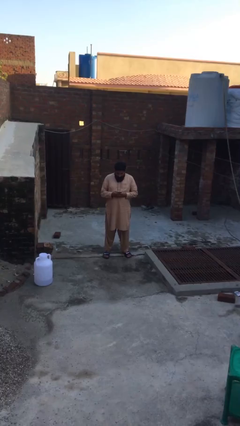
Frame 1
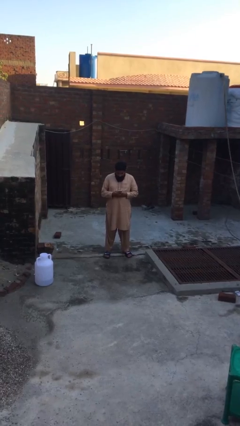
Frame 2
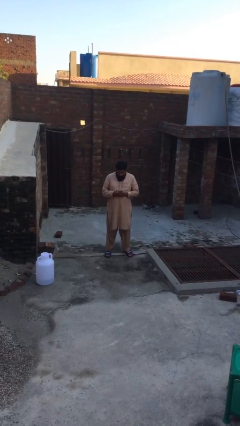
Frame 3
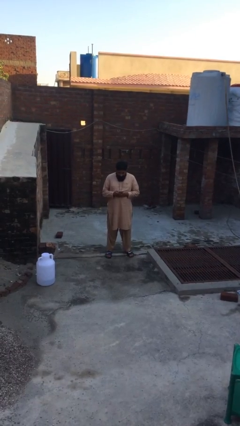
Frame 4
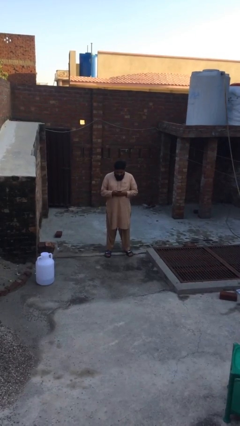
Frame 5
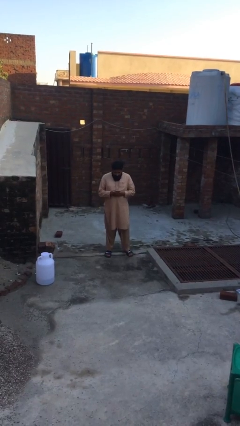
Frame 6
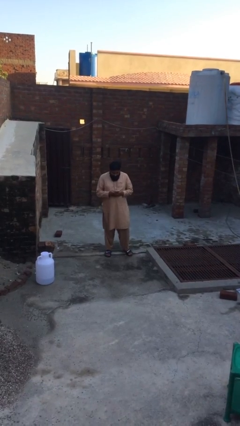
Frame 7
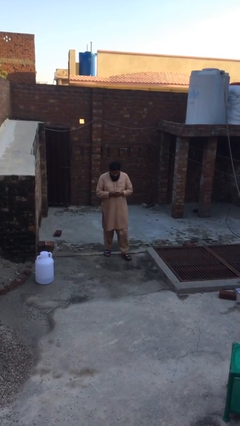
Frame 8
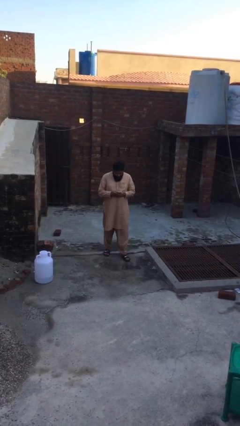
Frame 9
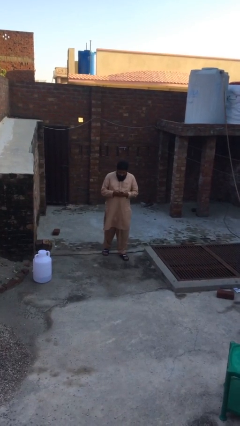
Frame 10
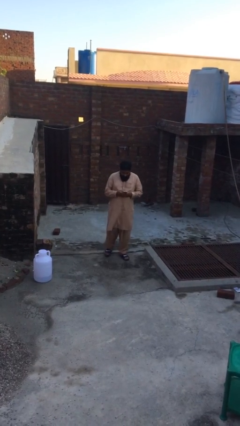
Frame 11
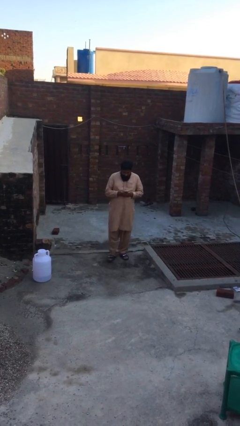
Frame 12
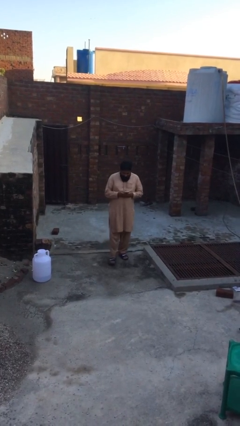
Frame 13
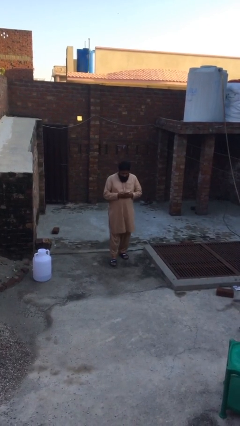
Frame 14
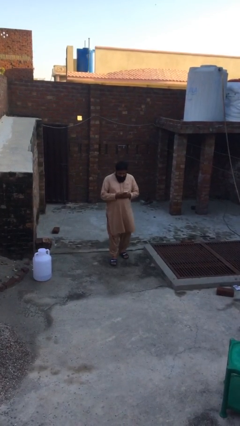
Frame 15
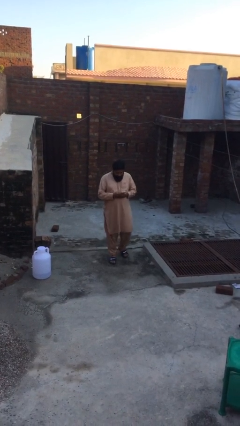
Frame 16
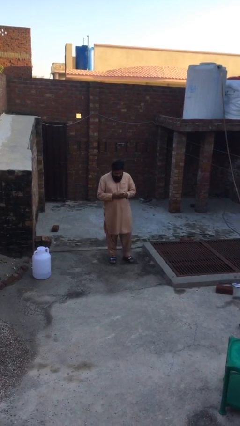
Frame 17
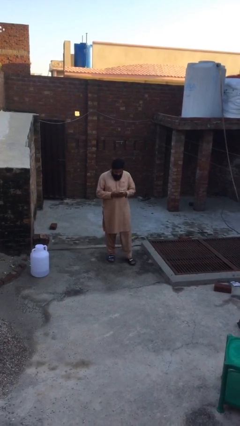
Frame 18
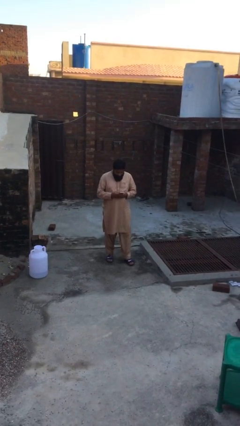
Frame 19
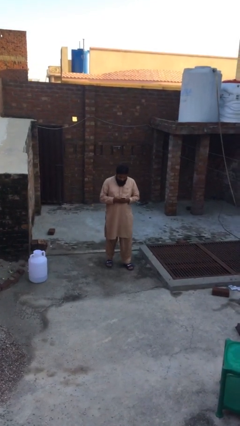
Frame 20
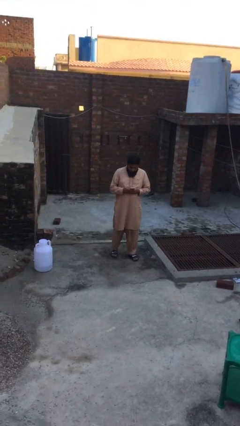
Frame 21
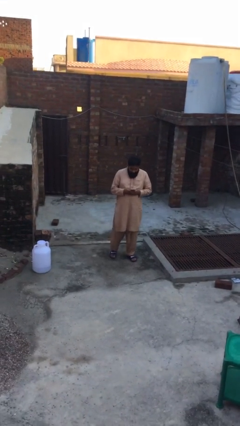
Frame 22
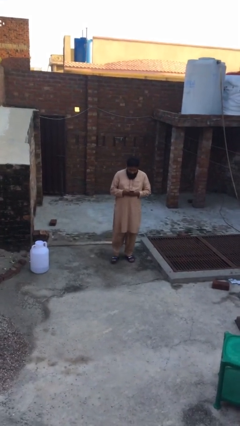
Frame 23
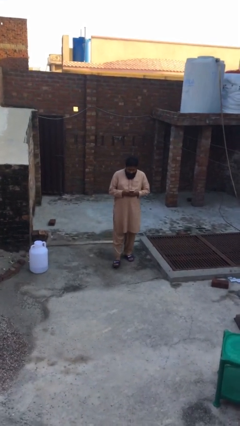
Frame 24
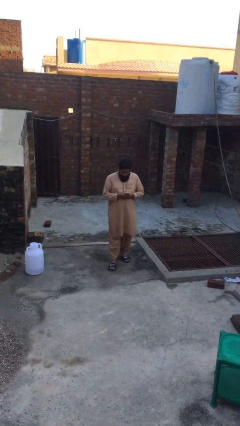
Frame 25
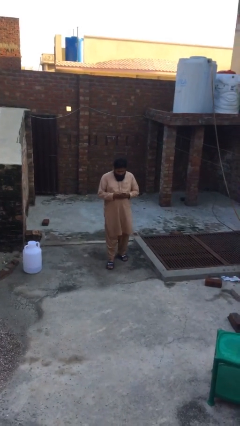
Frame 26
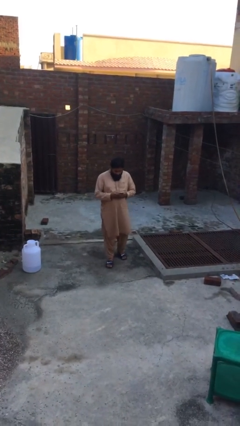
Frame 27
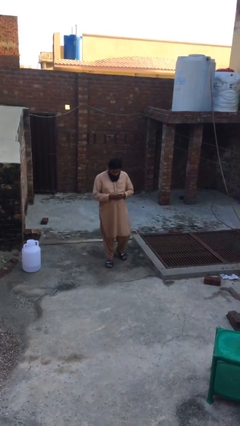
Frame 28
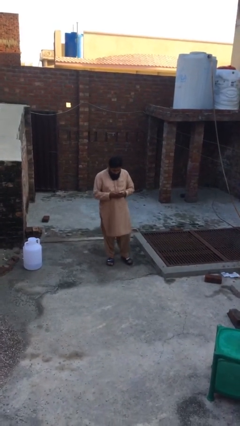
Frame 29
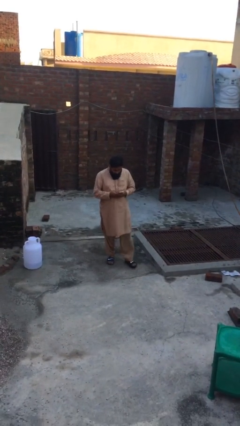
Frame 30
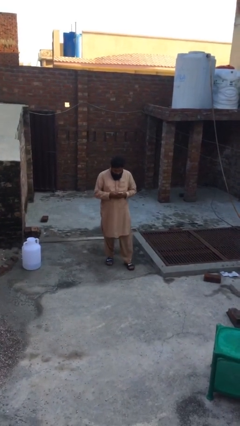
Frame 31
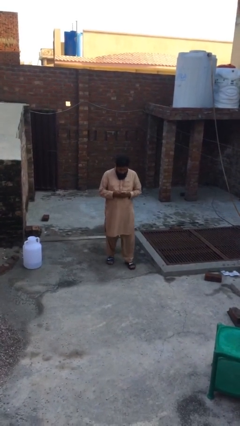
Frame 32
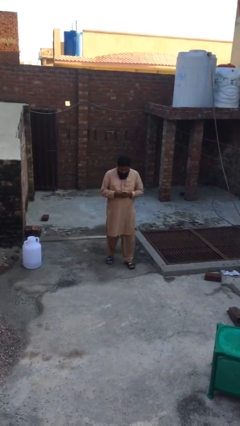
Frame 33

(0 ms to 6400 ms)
person texts on phone

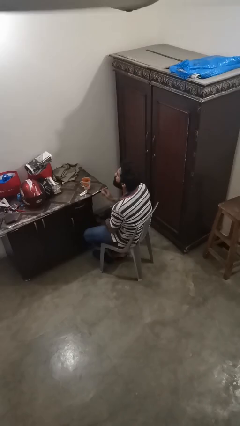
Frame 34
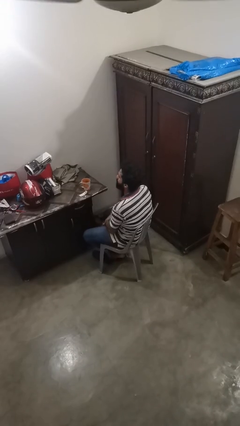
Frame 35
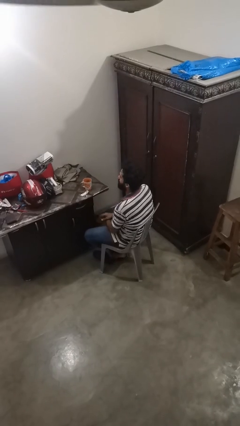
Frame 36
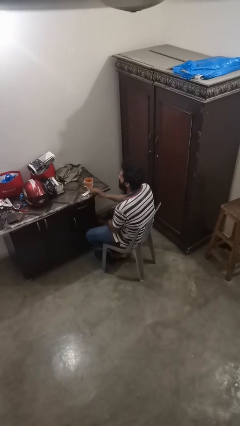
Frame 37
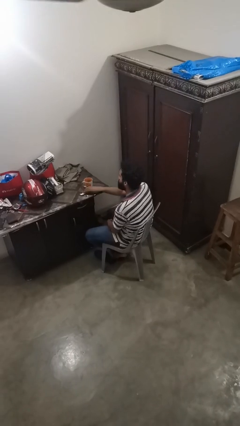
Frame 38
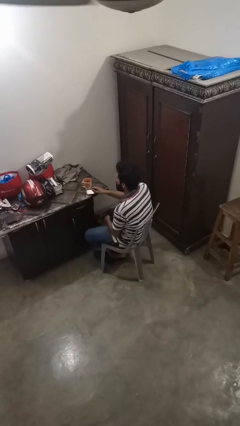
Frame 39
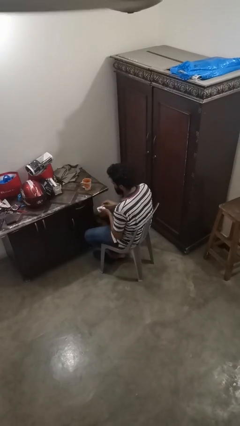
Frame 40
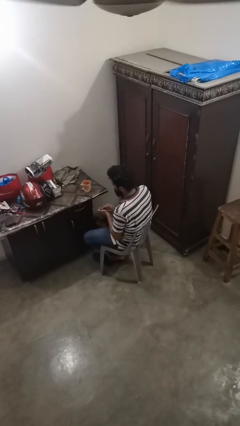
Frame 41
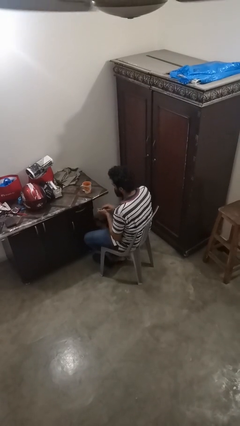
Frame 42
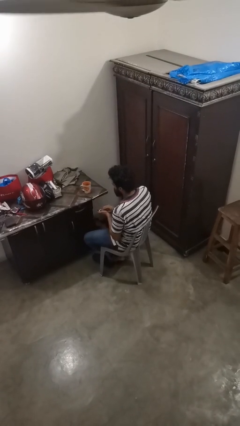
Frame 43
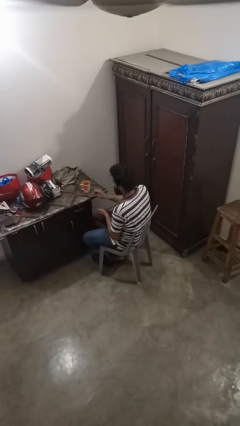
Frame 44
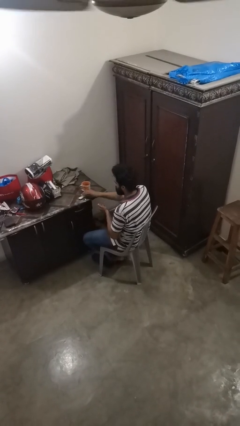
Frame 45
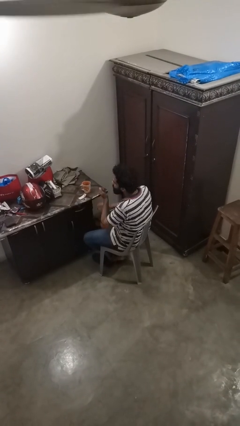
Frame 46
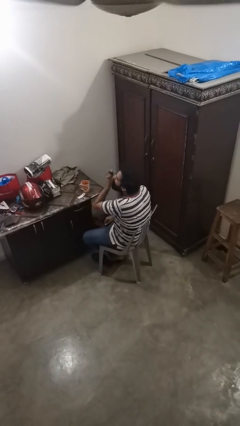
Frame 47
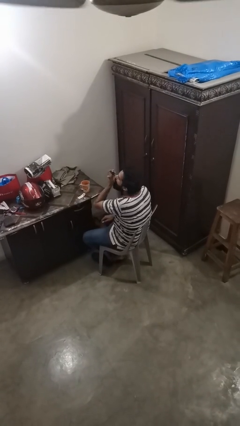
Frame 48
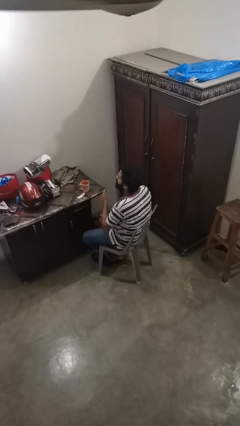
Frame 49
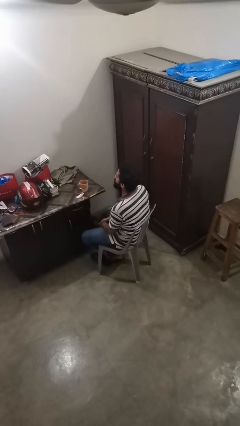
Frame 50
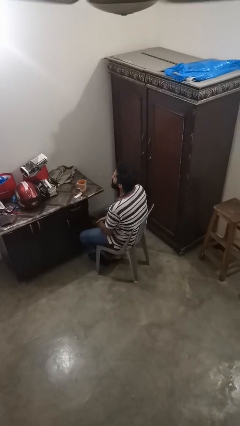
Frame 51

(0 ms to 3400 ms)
person takes medicine pills

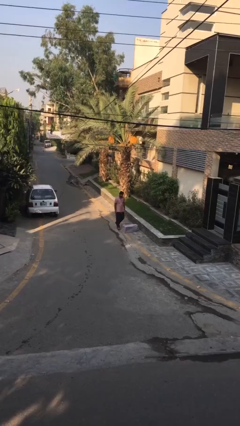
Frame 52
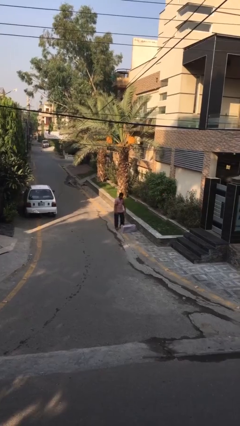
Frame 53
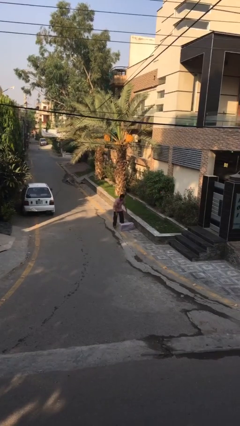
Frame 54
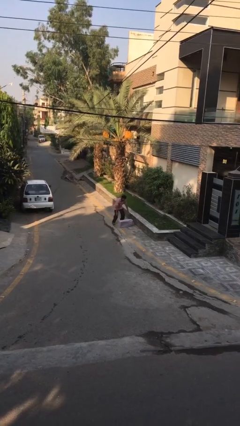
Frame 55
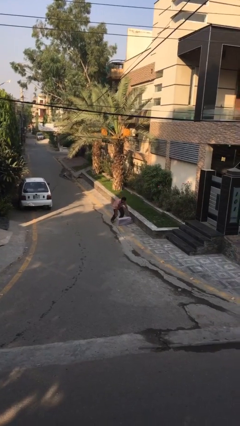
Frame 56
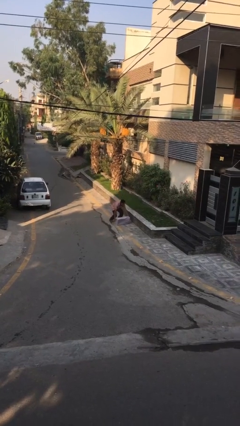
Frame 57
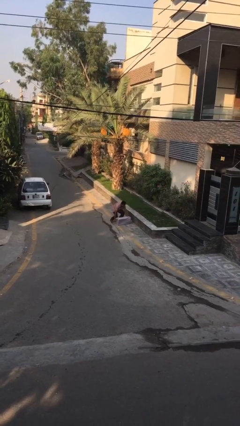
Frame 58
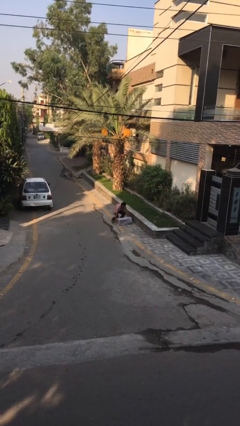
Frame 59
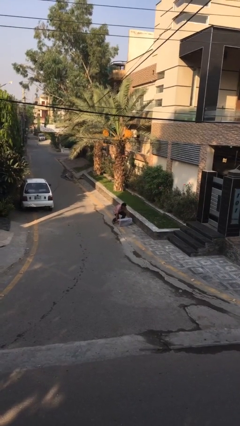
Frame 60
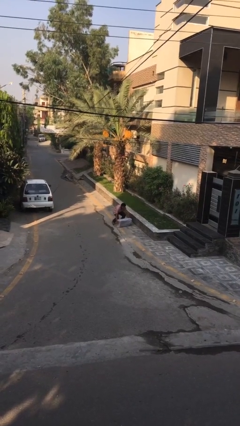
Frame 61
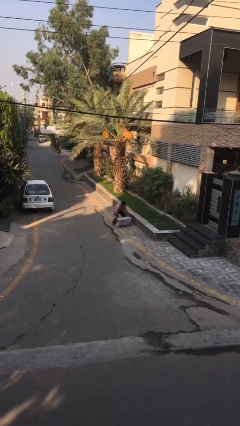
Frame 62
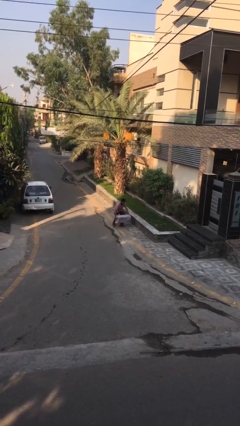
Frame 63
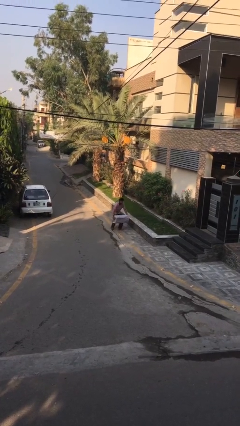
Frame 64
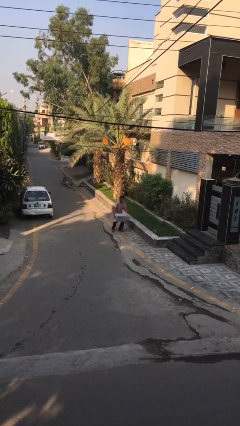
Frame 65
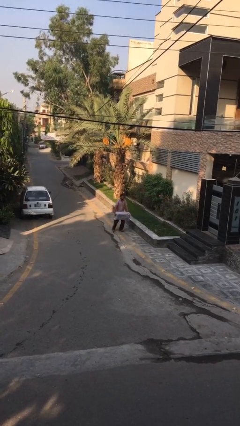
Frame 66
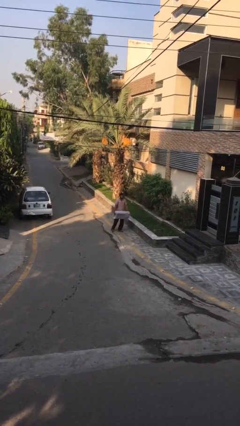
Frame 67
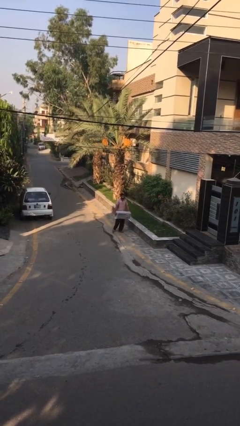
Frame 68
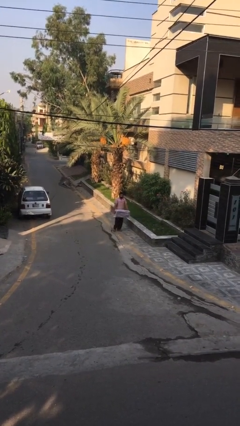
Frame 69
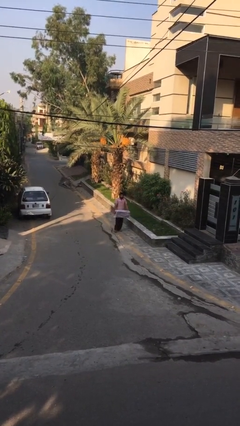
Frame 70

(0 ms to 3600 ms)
person picks up object from floor

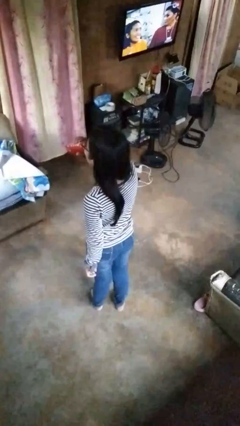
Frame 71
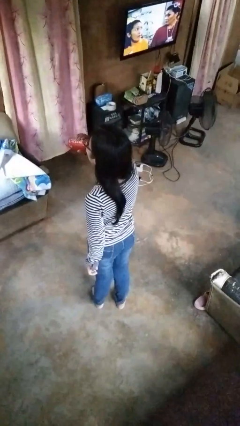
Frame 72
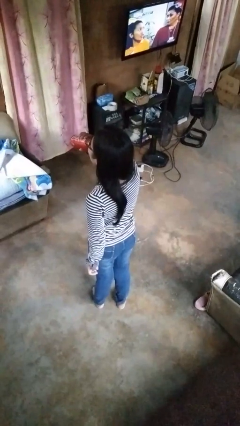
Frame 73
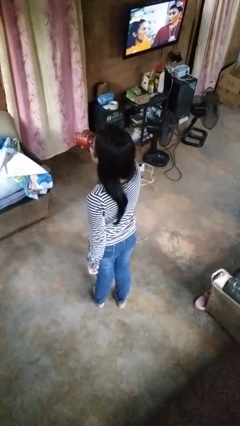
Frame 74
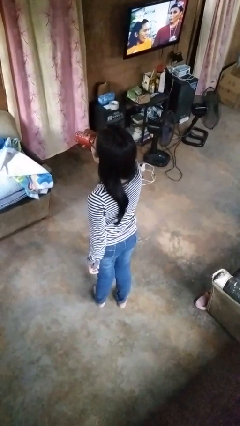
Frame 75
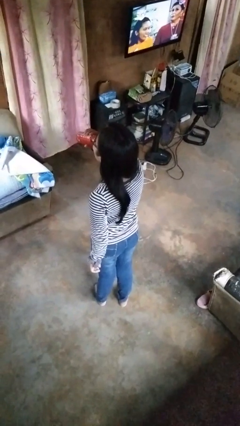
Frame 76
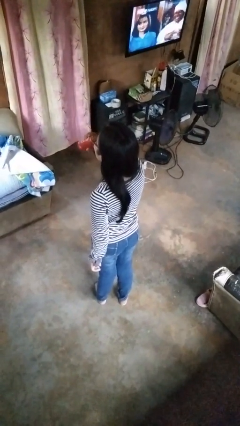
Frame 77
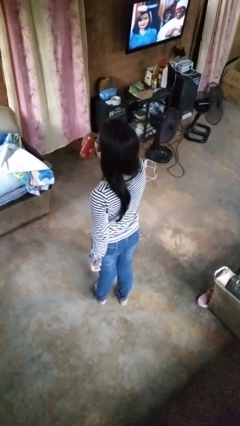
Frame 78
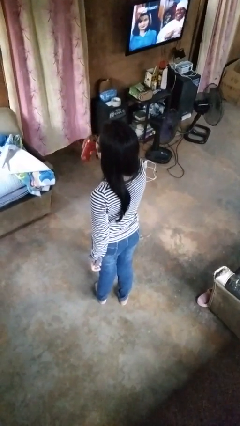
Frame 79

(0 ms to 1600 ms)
person drinks from beverage can

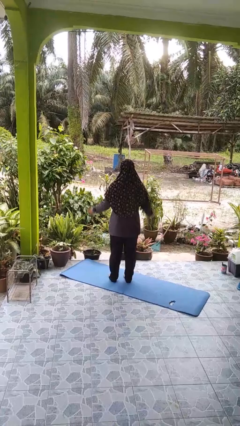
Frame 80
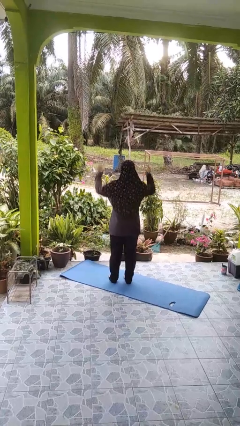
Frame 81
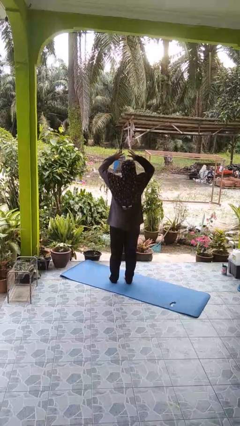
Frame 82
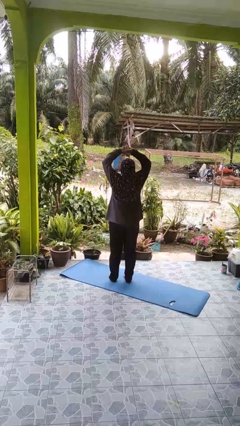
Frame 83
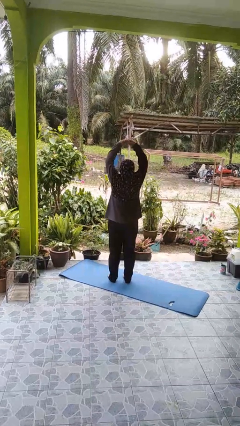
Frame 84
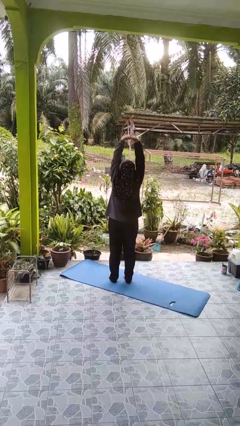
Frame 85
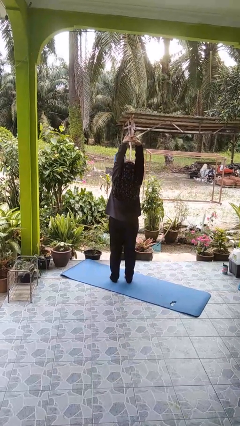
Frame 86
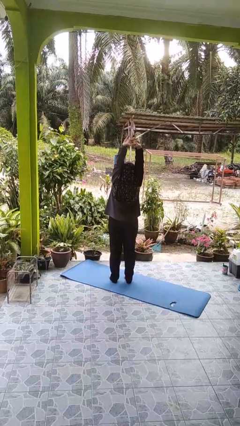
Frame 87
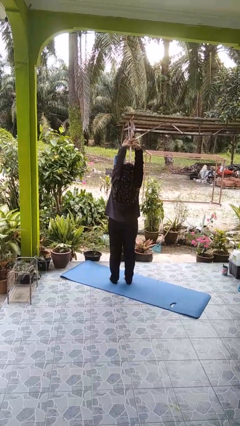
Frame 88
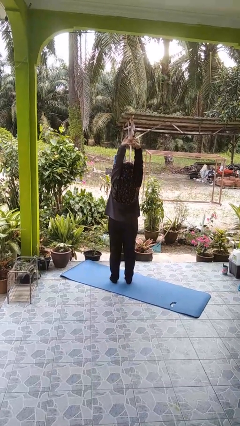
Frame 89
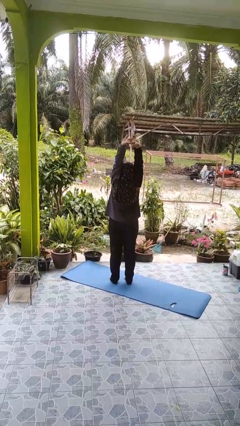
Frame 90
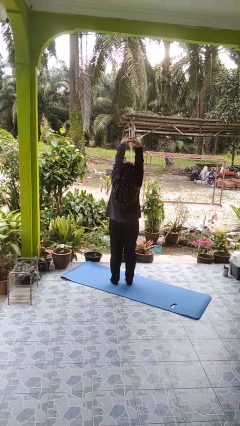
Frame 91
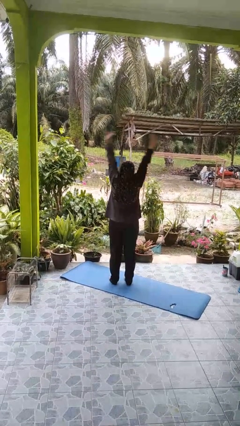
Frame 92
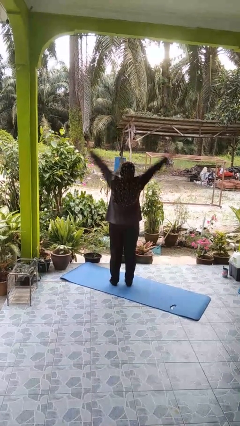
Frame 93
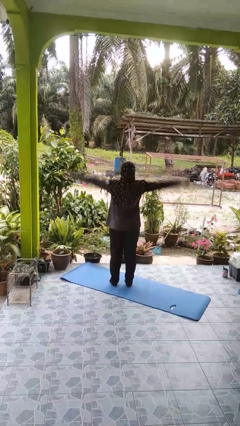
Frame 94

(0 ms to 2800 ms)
person stretches arms over head
